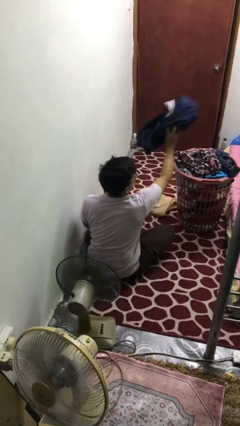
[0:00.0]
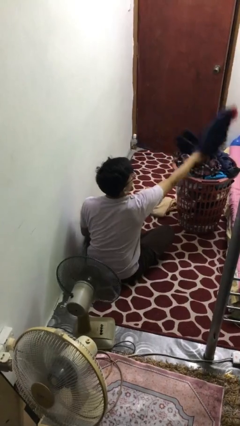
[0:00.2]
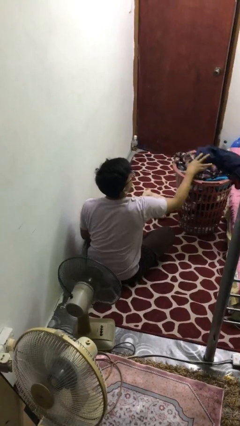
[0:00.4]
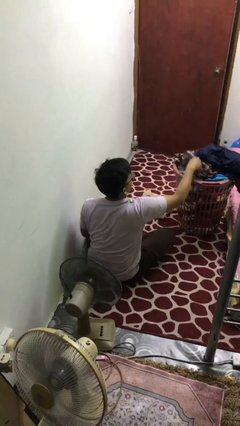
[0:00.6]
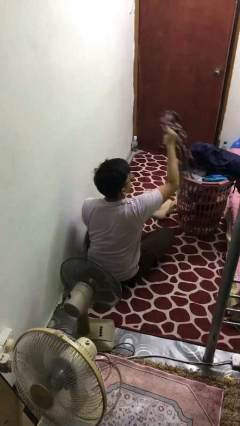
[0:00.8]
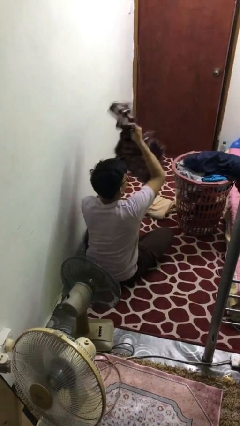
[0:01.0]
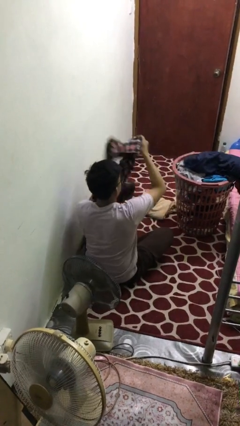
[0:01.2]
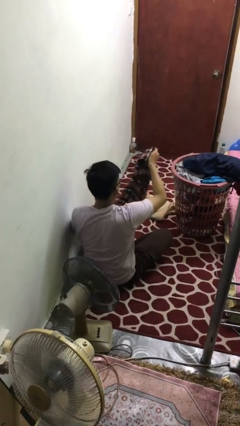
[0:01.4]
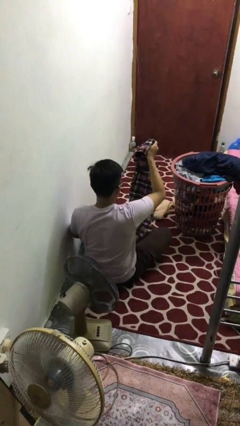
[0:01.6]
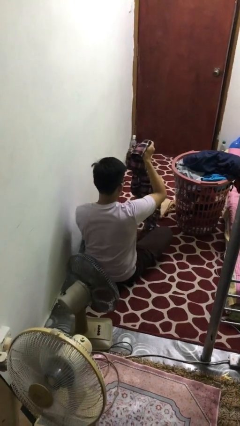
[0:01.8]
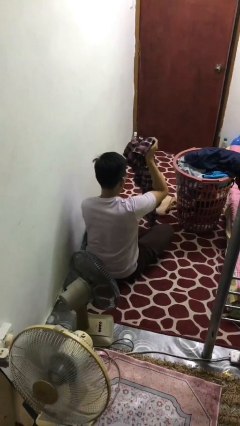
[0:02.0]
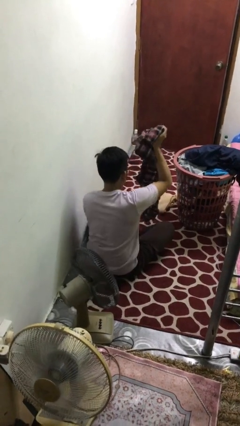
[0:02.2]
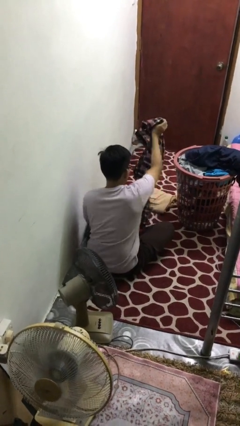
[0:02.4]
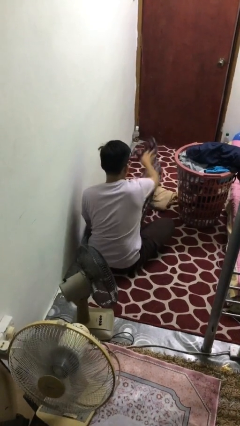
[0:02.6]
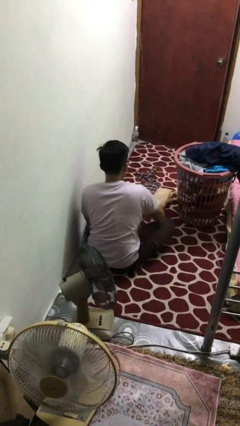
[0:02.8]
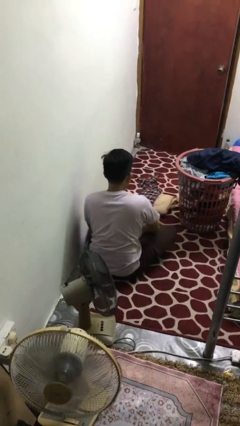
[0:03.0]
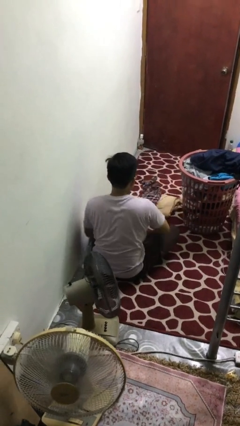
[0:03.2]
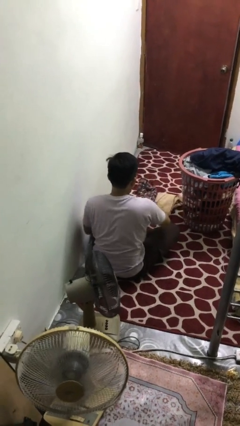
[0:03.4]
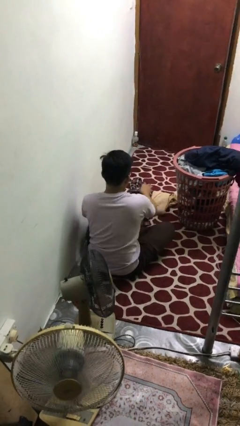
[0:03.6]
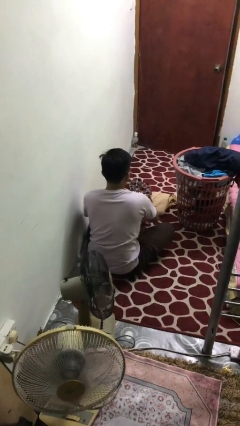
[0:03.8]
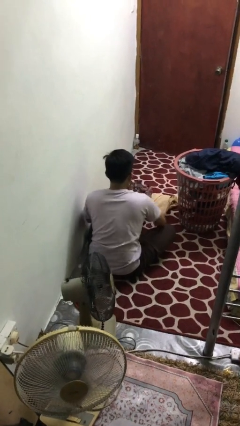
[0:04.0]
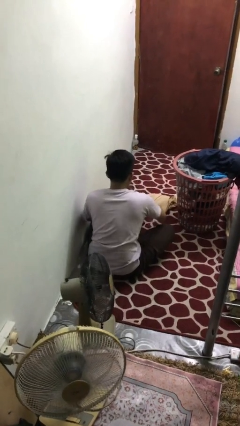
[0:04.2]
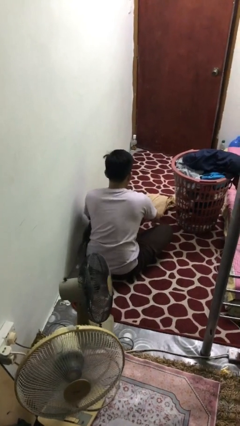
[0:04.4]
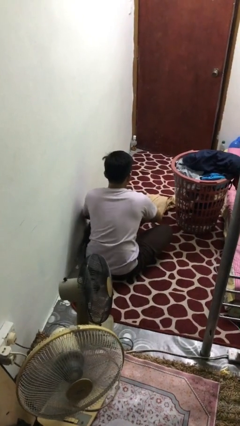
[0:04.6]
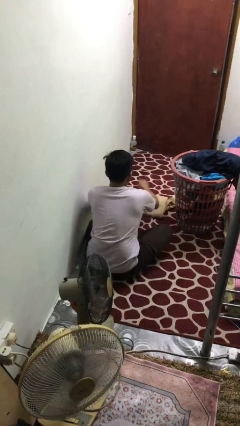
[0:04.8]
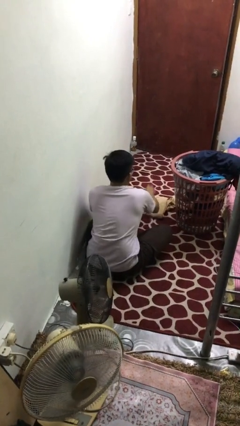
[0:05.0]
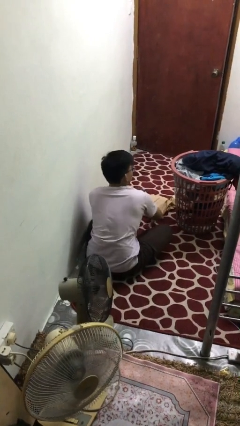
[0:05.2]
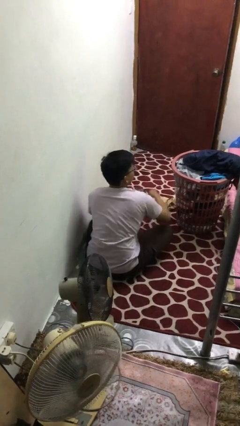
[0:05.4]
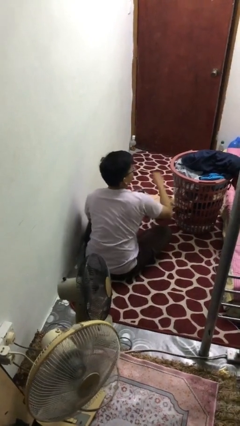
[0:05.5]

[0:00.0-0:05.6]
person folds pants

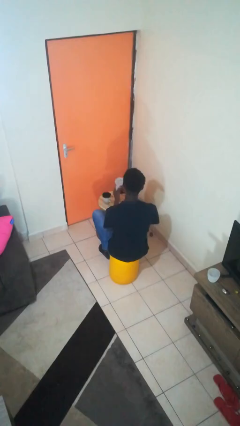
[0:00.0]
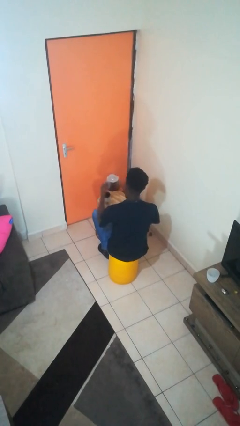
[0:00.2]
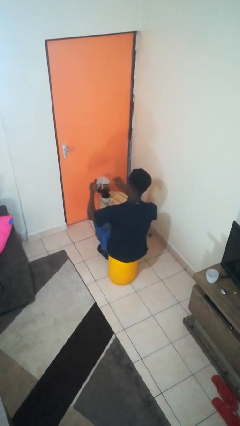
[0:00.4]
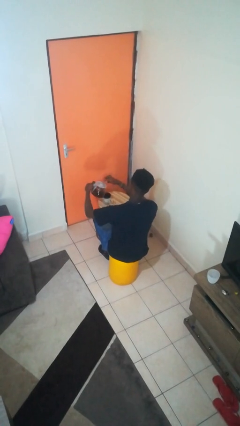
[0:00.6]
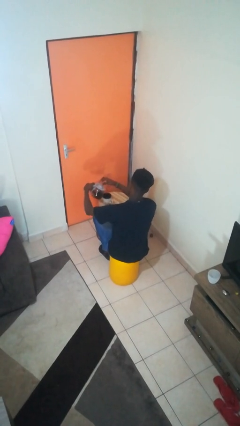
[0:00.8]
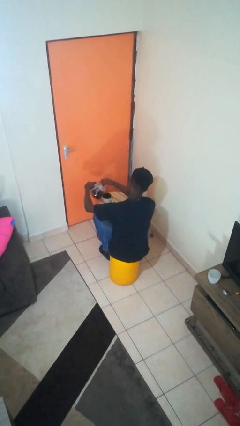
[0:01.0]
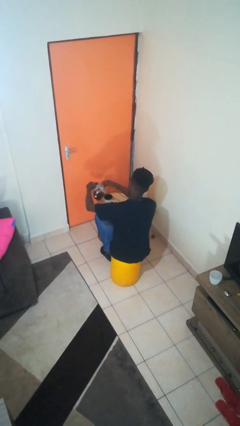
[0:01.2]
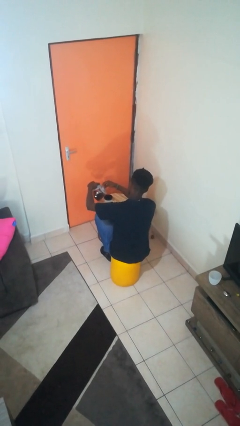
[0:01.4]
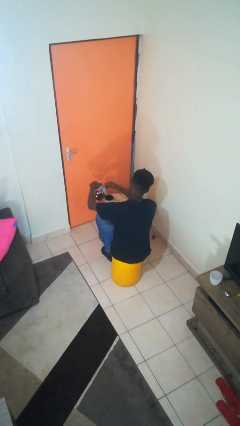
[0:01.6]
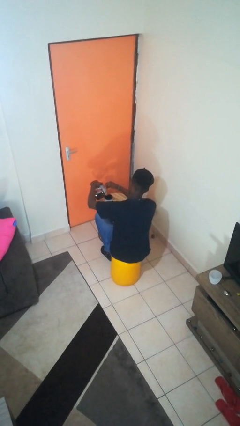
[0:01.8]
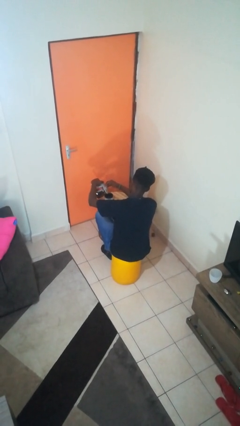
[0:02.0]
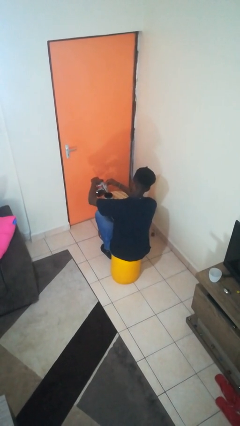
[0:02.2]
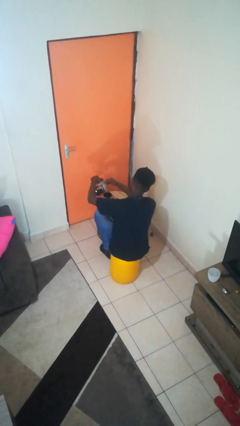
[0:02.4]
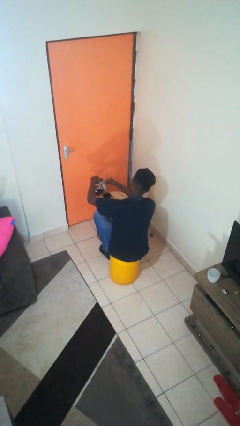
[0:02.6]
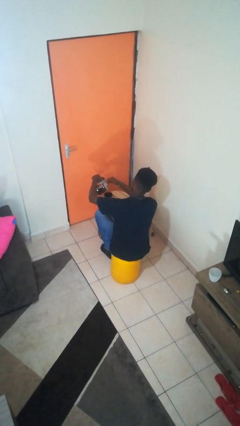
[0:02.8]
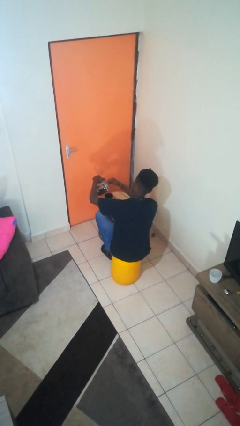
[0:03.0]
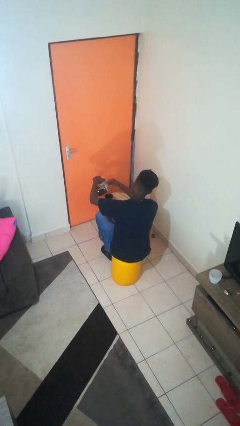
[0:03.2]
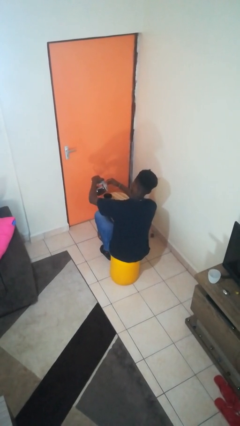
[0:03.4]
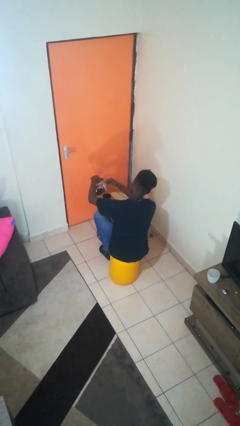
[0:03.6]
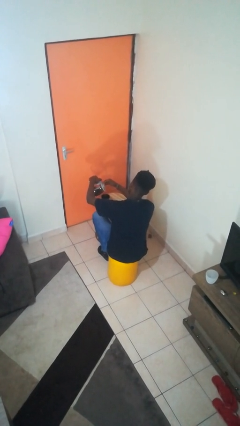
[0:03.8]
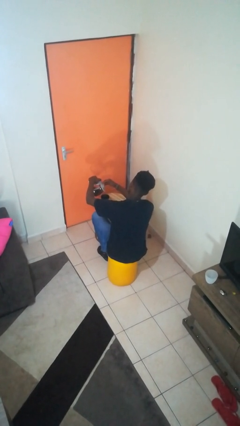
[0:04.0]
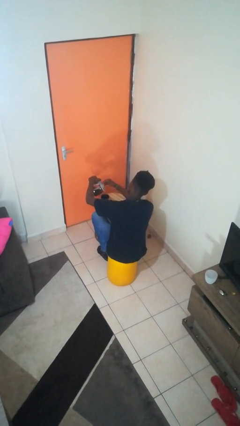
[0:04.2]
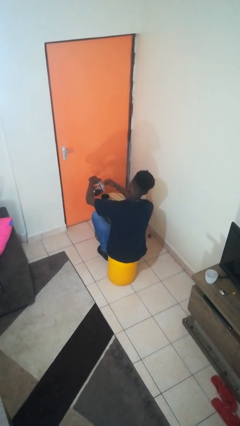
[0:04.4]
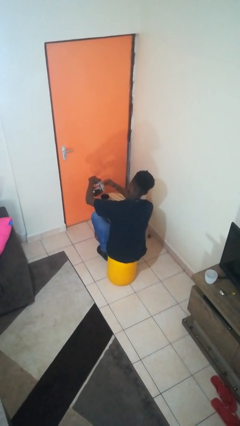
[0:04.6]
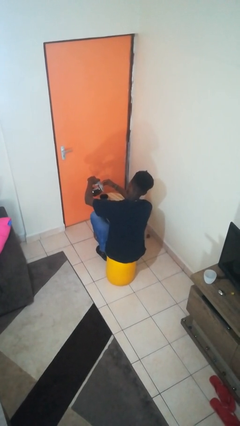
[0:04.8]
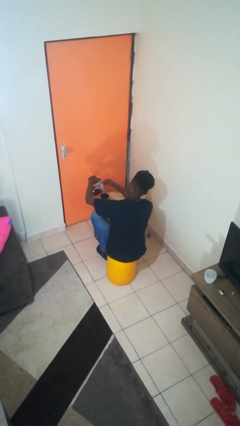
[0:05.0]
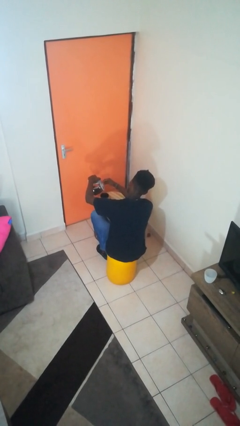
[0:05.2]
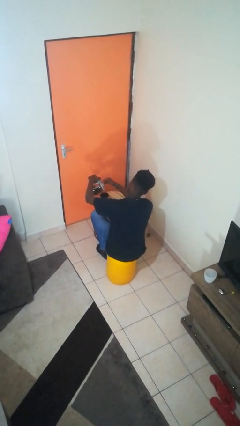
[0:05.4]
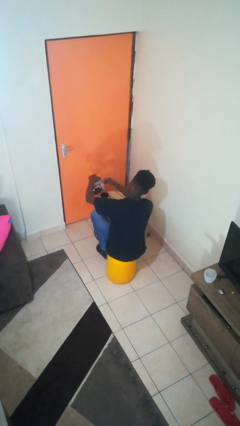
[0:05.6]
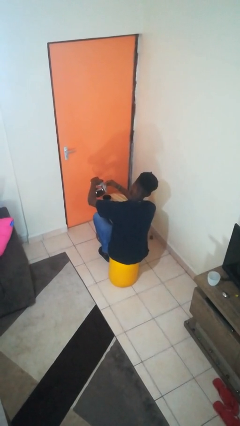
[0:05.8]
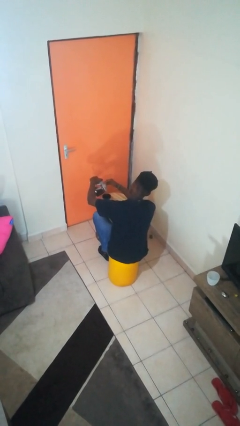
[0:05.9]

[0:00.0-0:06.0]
person pours coffee into mug

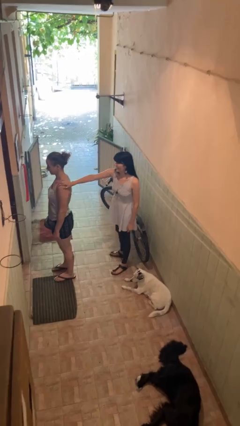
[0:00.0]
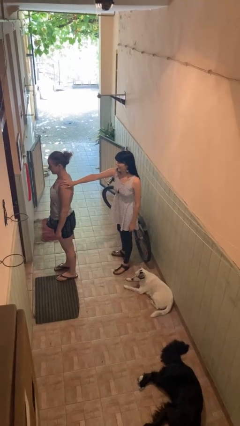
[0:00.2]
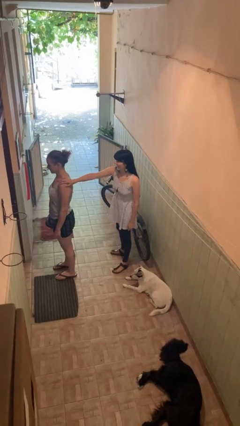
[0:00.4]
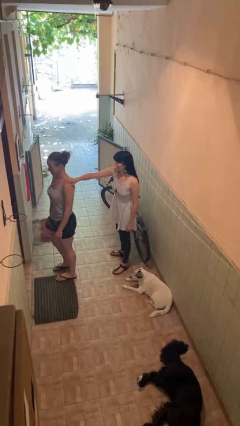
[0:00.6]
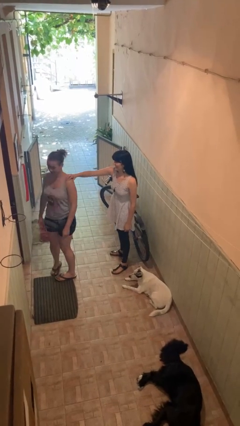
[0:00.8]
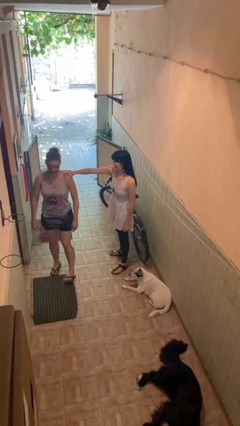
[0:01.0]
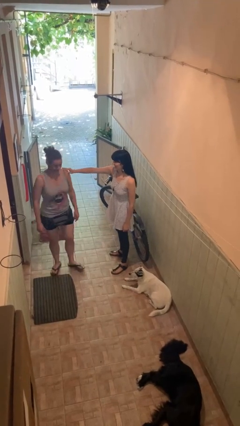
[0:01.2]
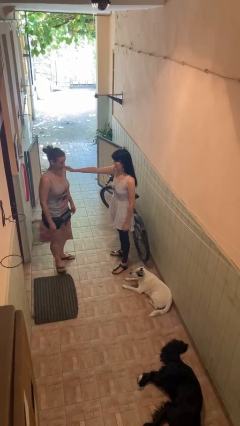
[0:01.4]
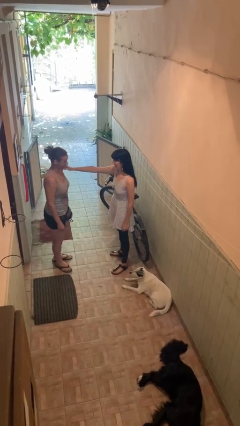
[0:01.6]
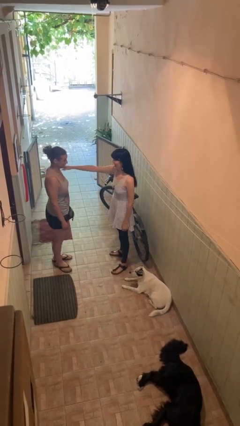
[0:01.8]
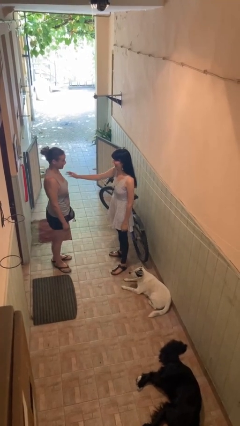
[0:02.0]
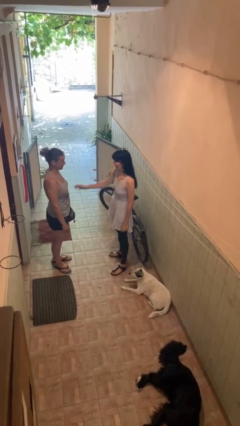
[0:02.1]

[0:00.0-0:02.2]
person spins person around

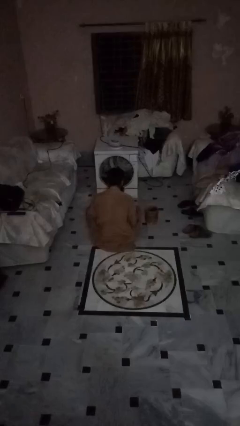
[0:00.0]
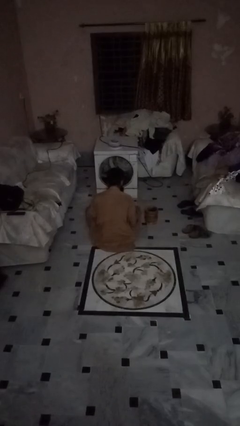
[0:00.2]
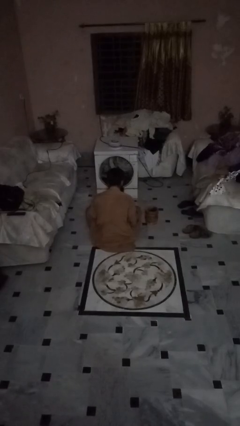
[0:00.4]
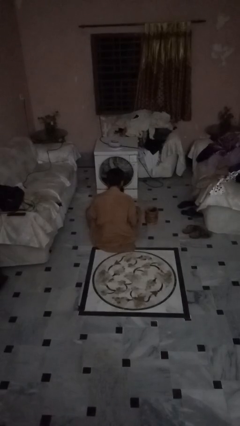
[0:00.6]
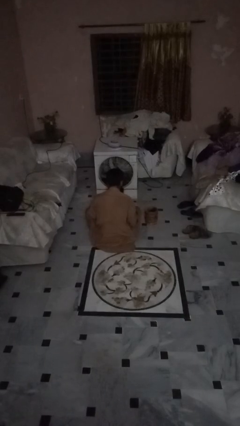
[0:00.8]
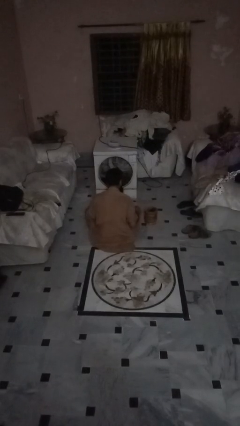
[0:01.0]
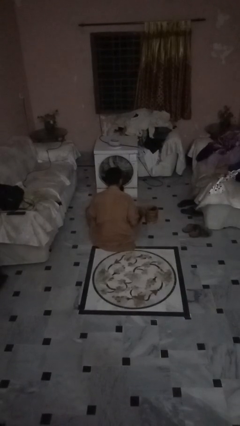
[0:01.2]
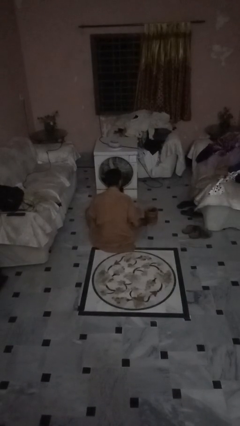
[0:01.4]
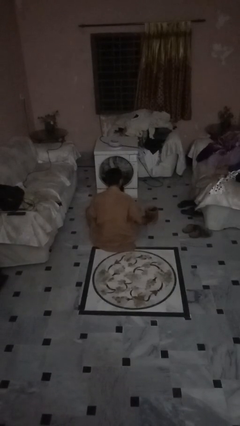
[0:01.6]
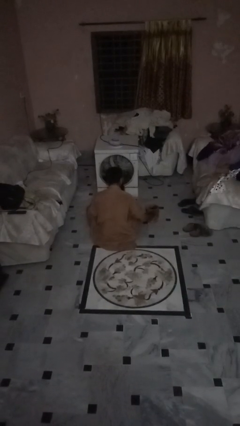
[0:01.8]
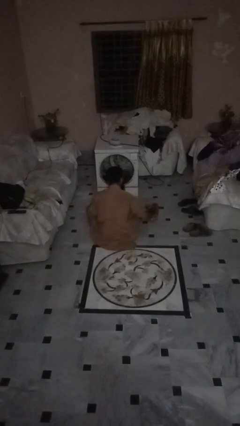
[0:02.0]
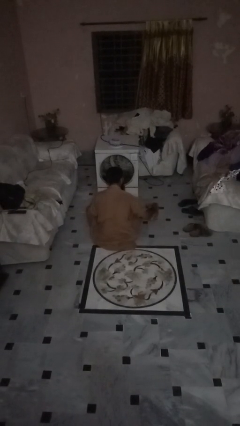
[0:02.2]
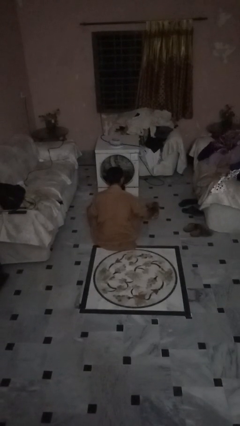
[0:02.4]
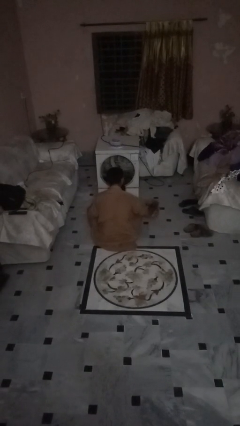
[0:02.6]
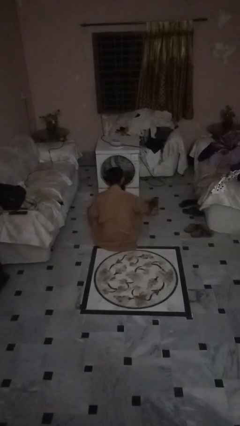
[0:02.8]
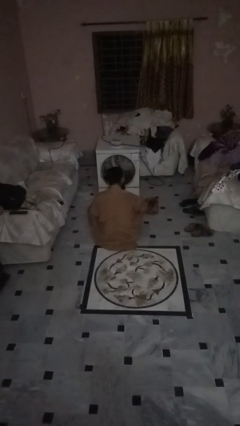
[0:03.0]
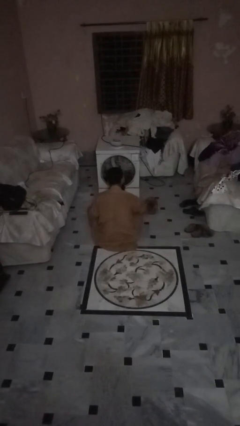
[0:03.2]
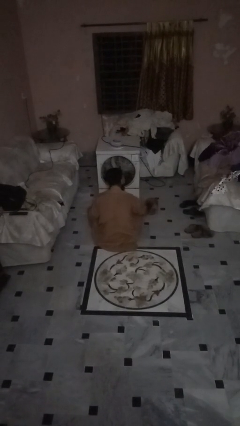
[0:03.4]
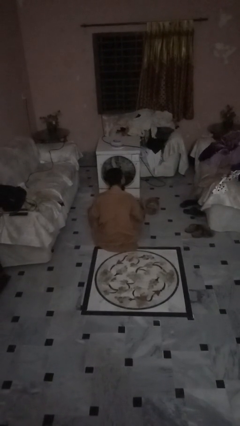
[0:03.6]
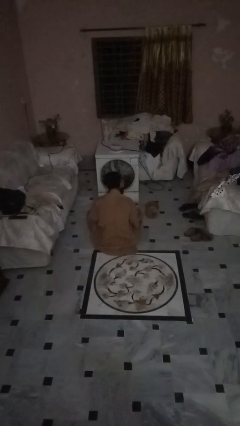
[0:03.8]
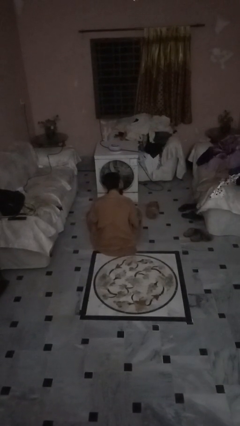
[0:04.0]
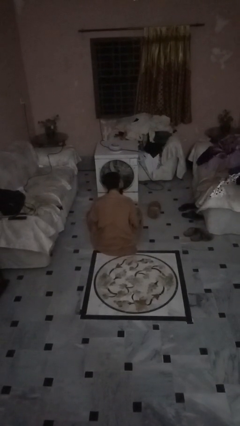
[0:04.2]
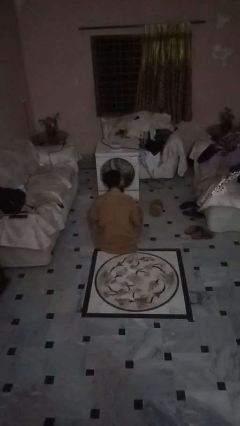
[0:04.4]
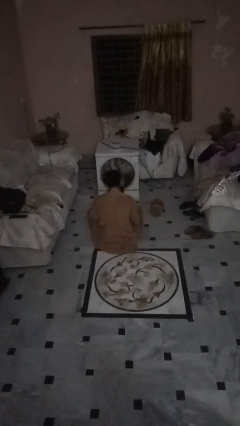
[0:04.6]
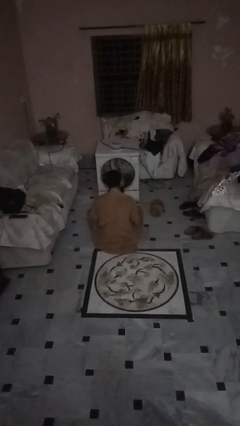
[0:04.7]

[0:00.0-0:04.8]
person knocks over furniture
